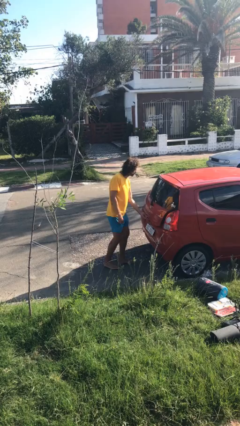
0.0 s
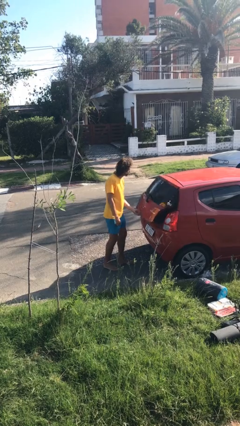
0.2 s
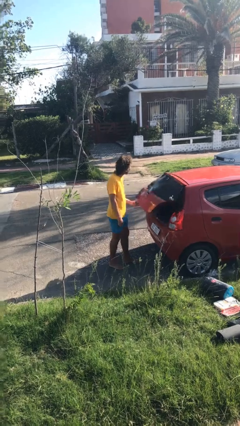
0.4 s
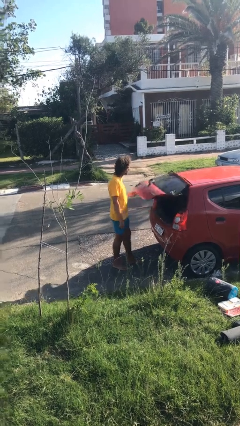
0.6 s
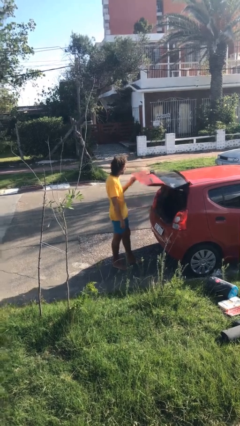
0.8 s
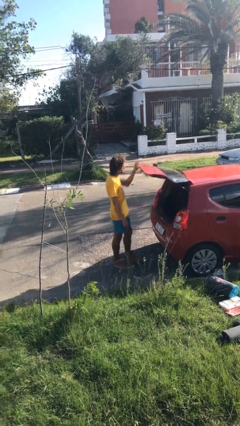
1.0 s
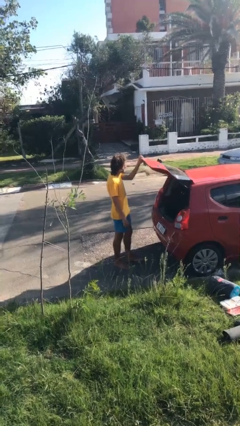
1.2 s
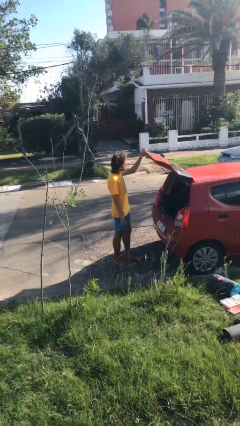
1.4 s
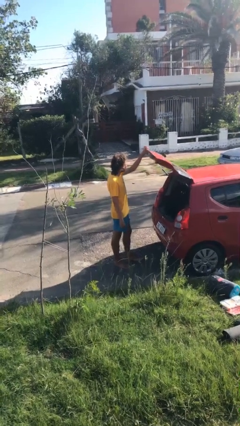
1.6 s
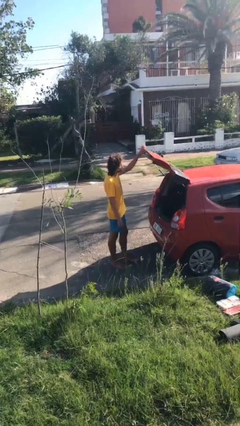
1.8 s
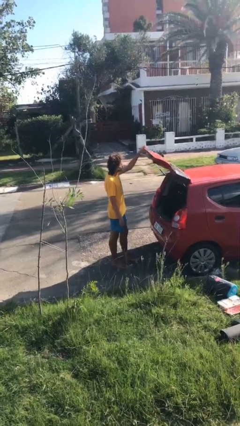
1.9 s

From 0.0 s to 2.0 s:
person opens car trunk

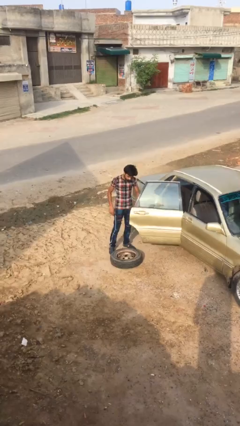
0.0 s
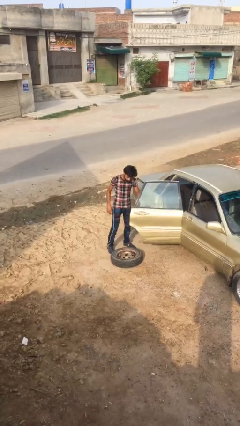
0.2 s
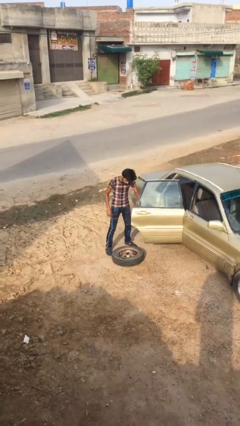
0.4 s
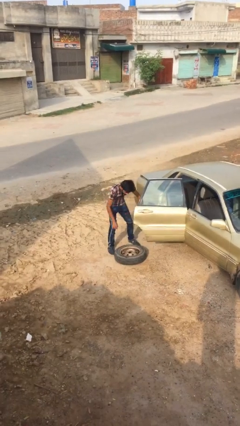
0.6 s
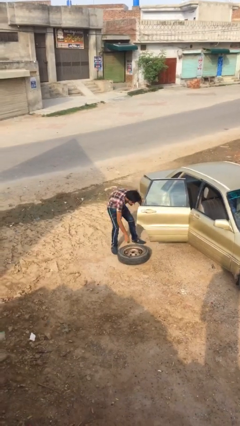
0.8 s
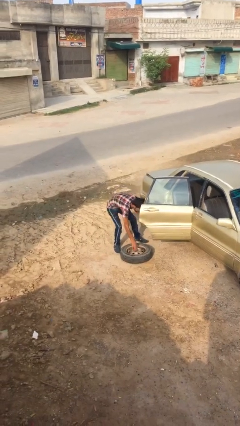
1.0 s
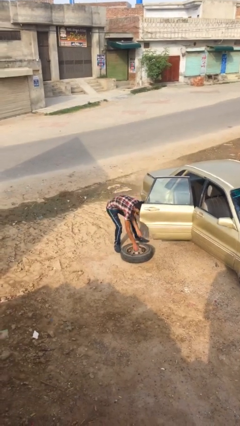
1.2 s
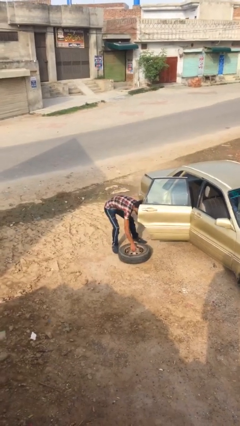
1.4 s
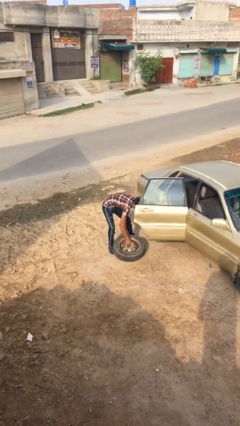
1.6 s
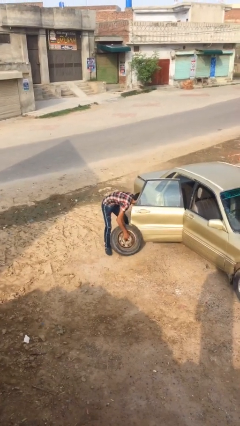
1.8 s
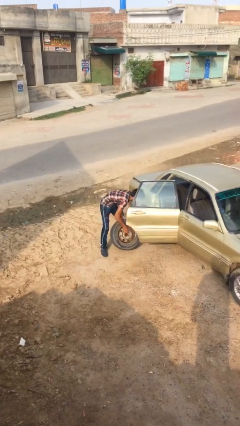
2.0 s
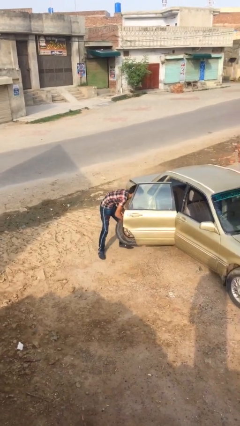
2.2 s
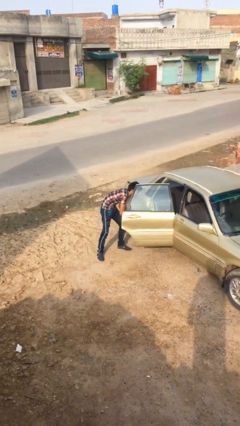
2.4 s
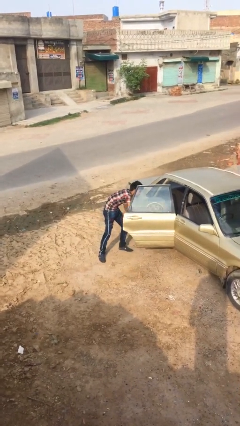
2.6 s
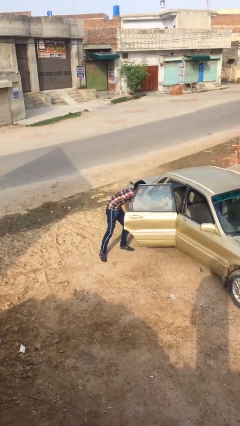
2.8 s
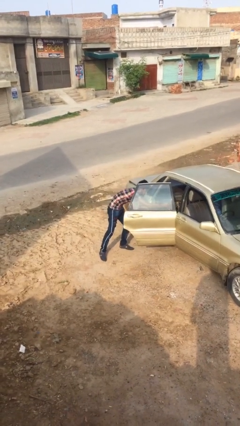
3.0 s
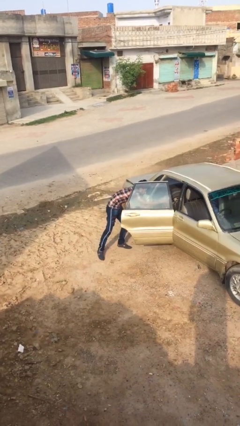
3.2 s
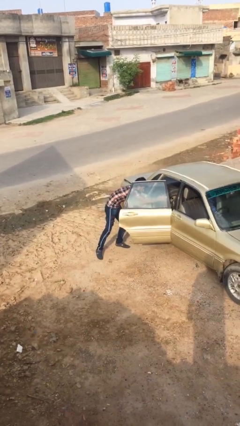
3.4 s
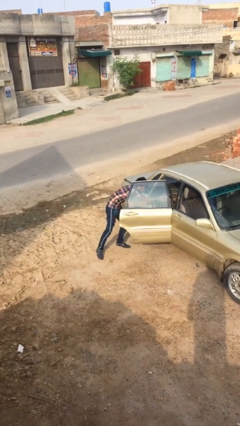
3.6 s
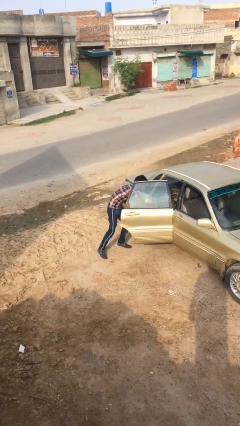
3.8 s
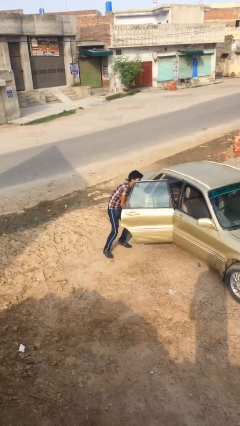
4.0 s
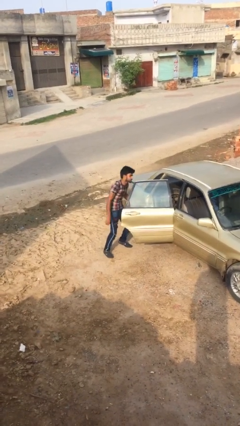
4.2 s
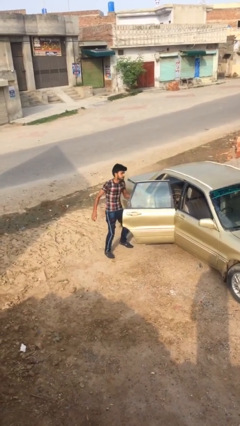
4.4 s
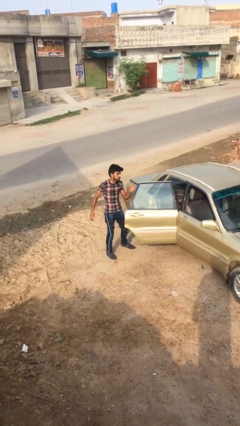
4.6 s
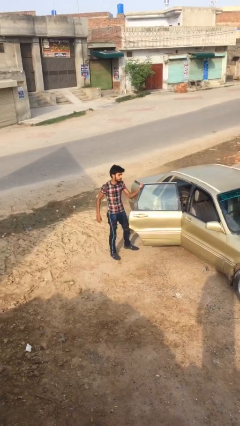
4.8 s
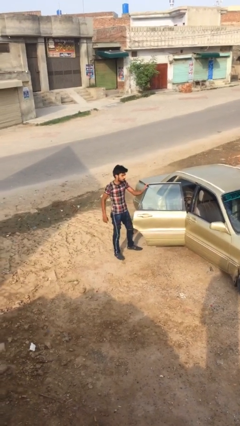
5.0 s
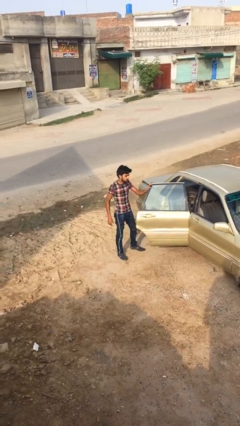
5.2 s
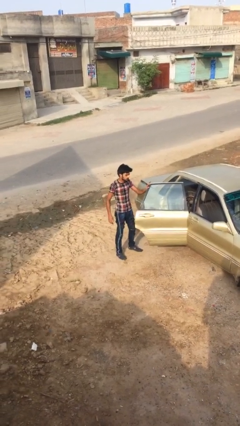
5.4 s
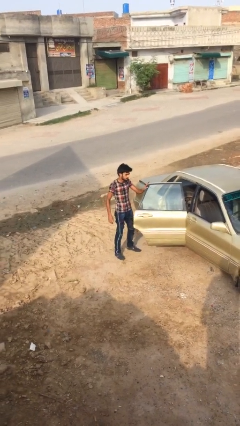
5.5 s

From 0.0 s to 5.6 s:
person loads car

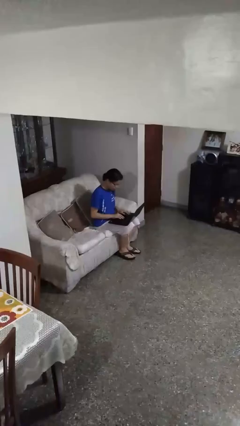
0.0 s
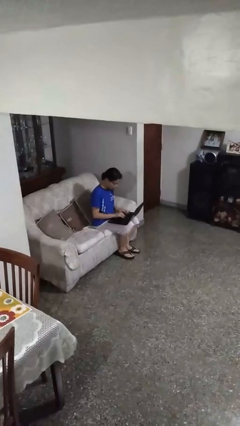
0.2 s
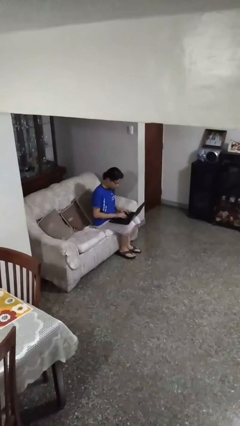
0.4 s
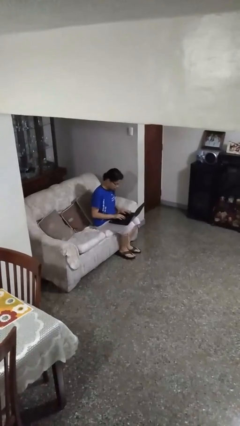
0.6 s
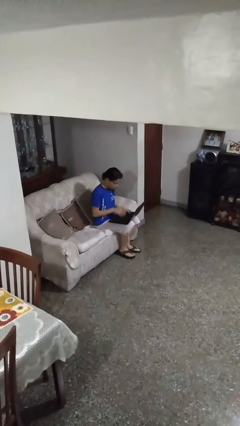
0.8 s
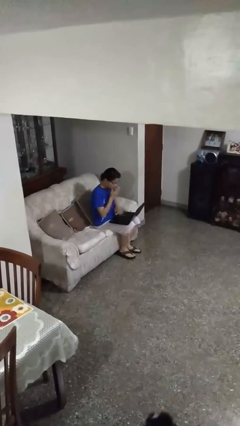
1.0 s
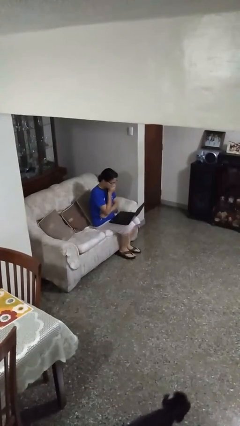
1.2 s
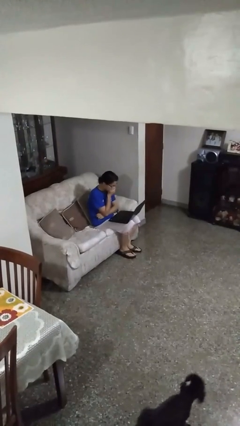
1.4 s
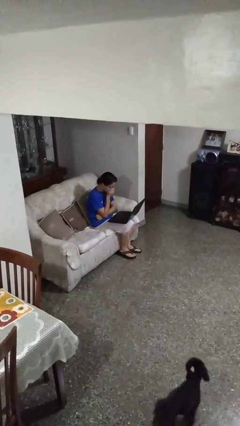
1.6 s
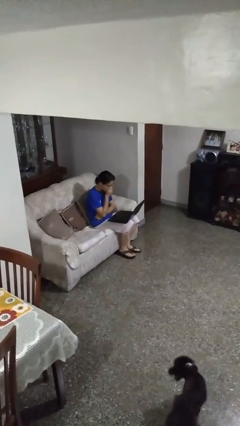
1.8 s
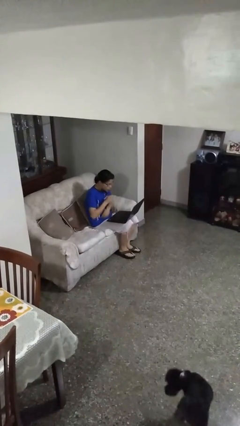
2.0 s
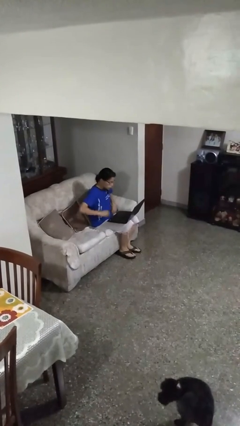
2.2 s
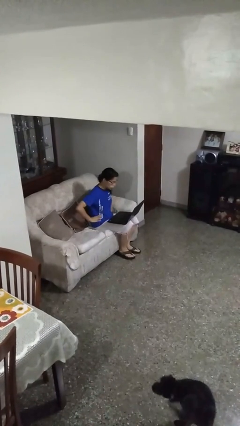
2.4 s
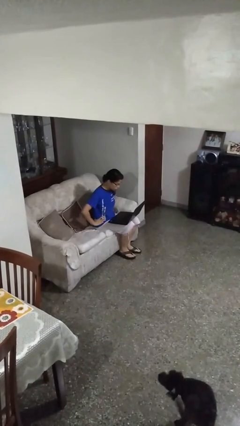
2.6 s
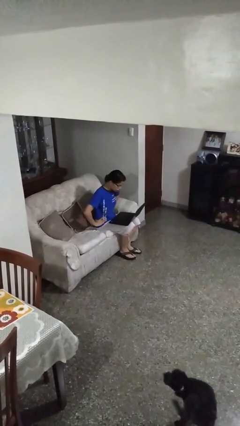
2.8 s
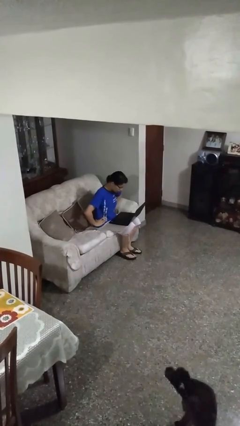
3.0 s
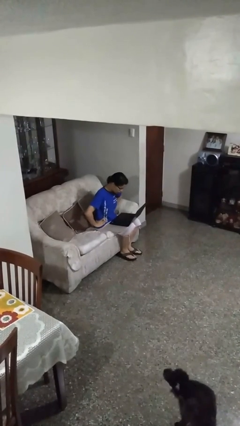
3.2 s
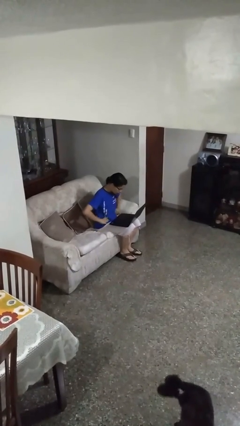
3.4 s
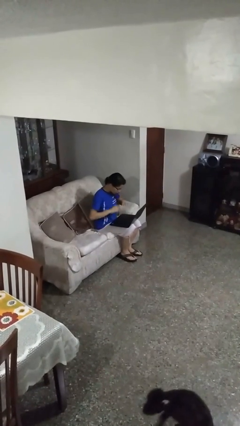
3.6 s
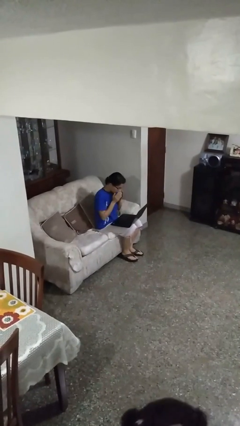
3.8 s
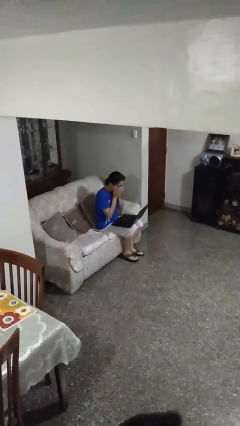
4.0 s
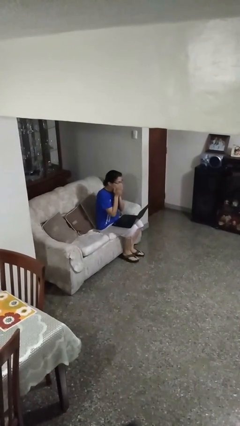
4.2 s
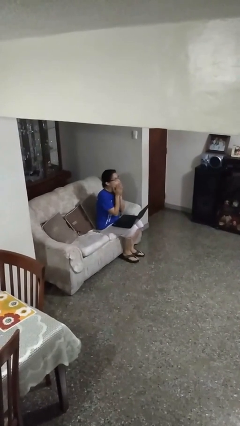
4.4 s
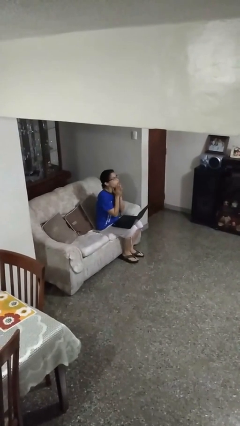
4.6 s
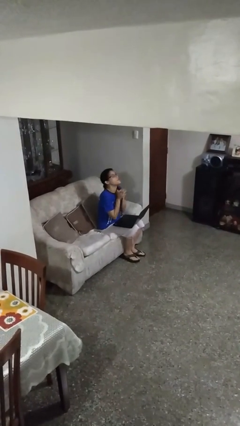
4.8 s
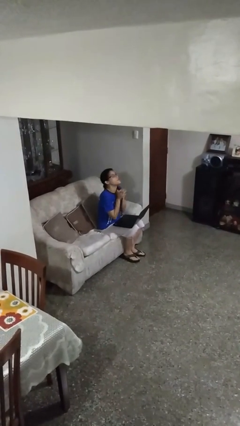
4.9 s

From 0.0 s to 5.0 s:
person interacts with laptop

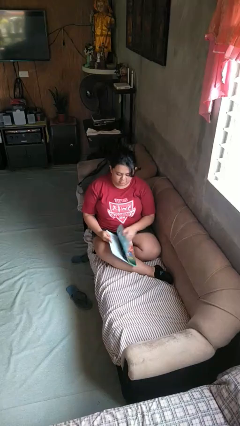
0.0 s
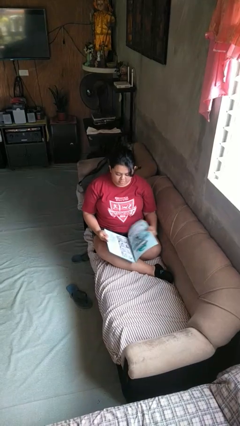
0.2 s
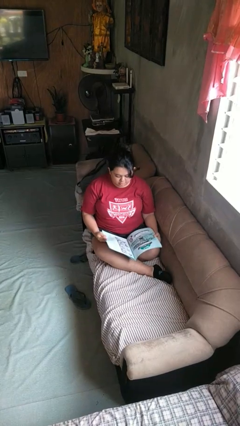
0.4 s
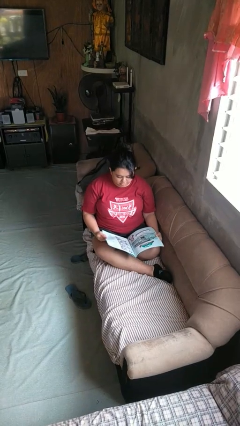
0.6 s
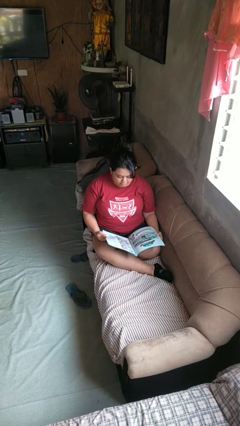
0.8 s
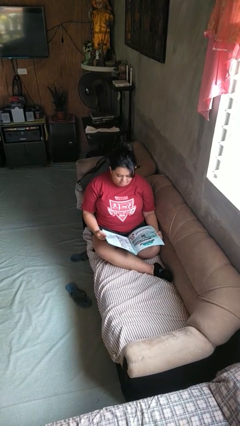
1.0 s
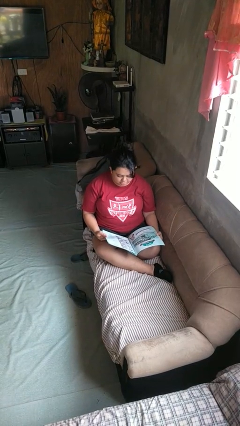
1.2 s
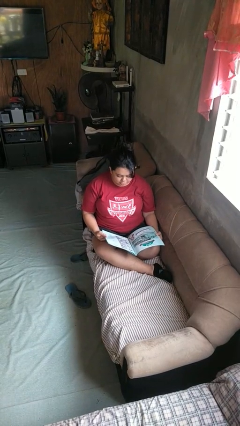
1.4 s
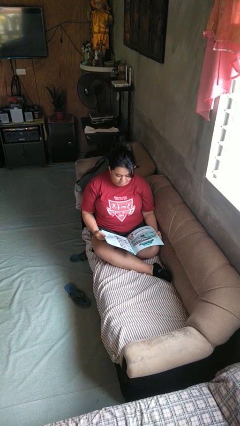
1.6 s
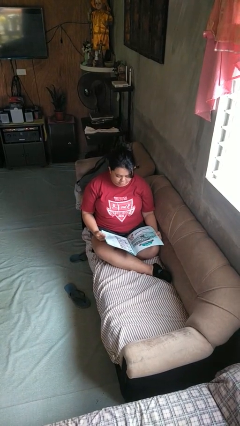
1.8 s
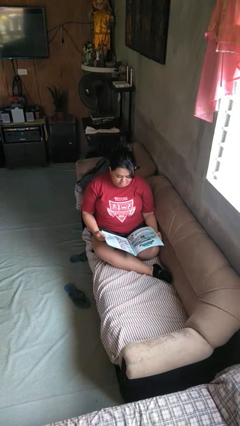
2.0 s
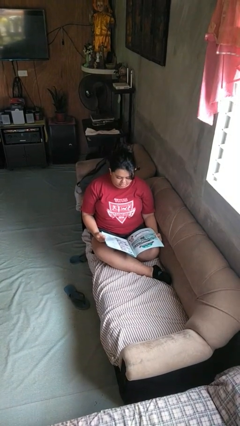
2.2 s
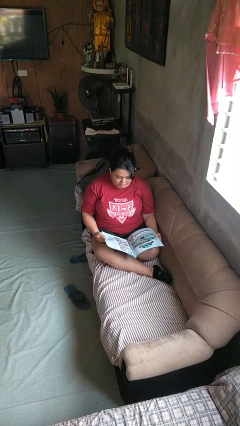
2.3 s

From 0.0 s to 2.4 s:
person reads magazine

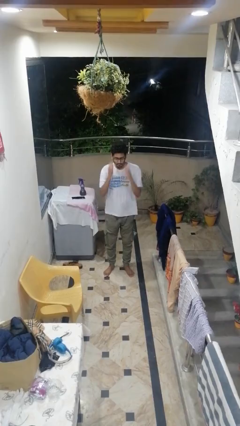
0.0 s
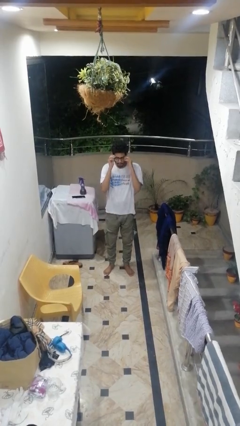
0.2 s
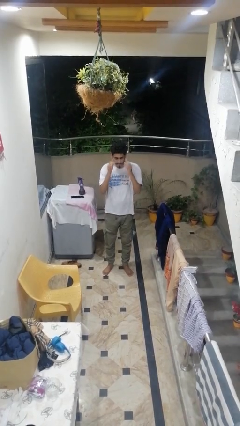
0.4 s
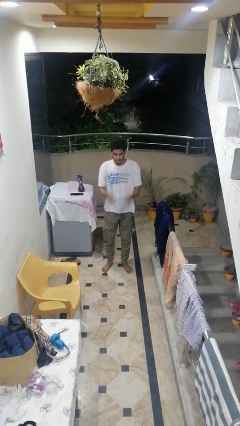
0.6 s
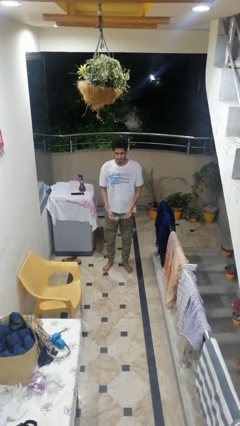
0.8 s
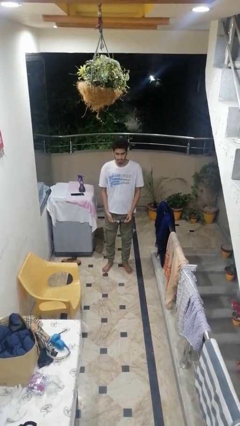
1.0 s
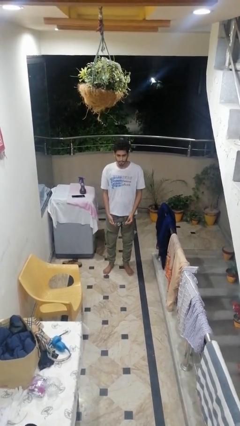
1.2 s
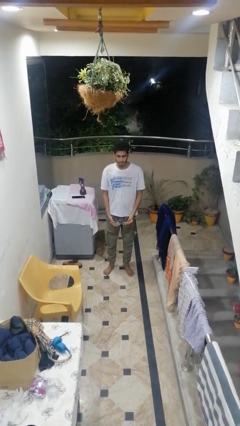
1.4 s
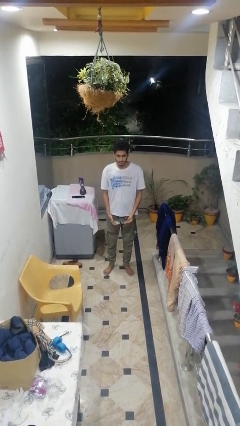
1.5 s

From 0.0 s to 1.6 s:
person takes off glasses

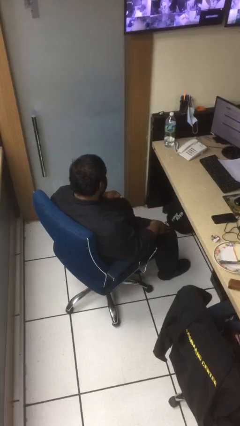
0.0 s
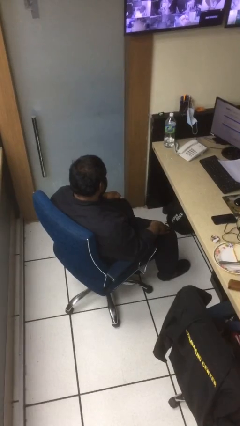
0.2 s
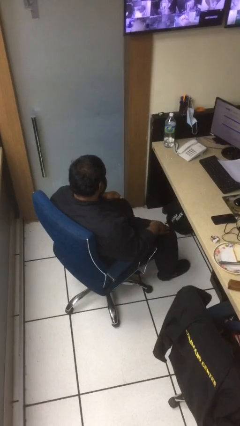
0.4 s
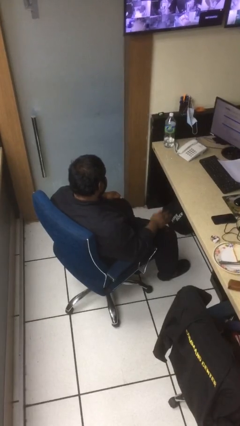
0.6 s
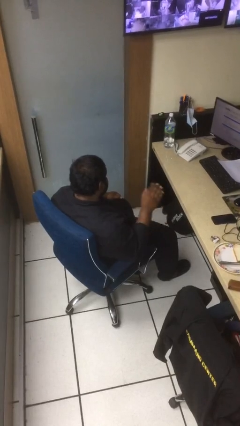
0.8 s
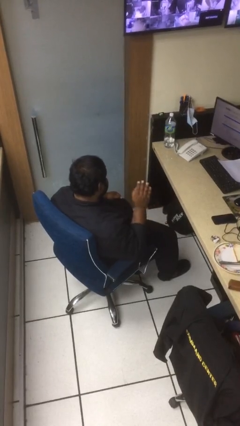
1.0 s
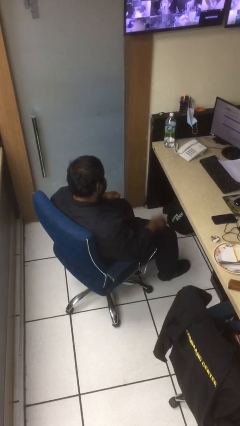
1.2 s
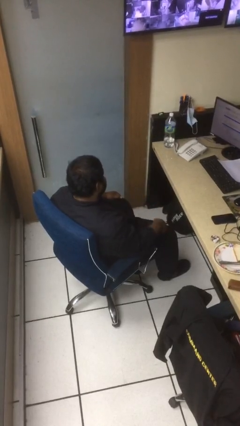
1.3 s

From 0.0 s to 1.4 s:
person slaps hands on thighs
